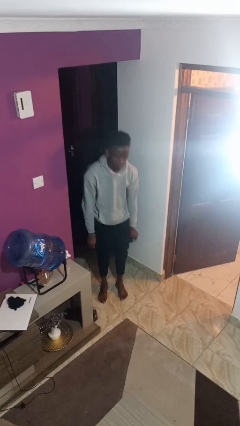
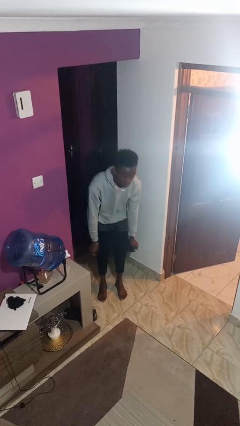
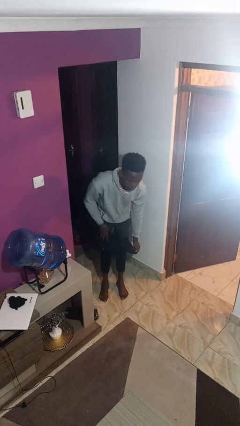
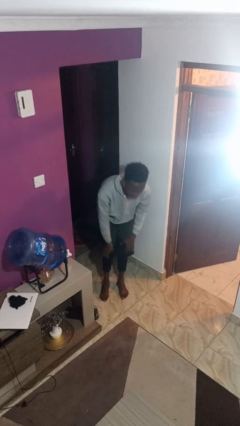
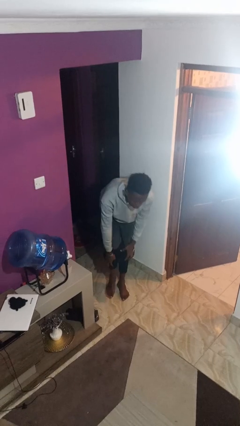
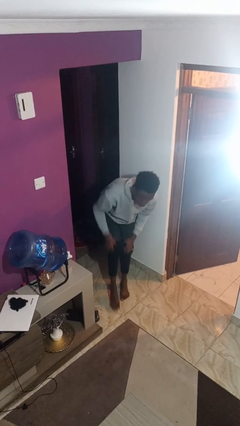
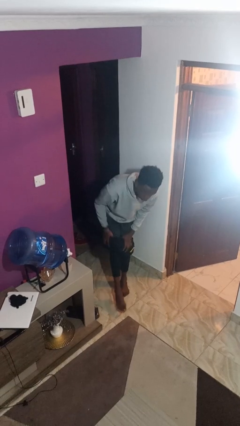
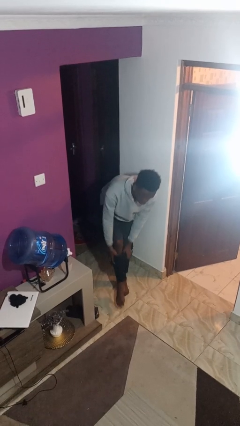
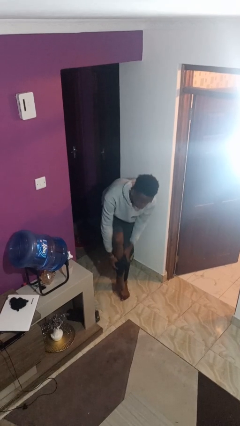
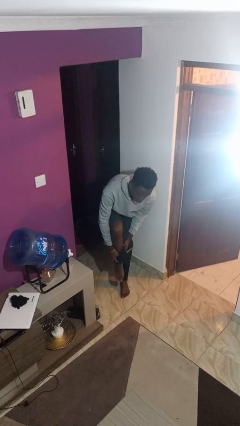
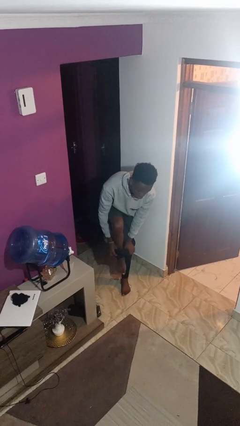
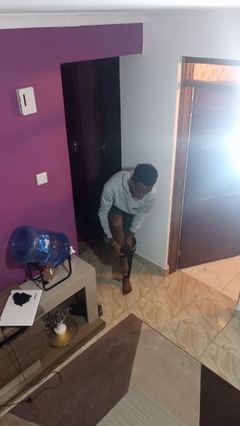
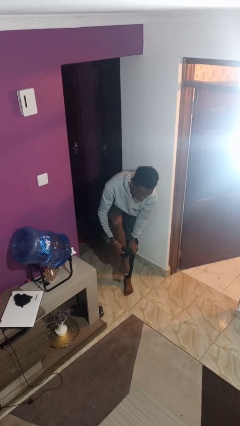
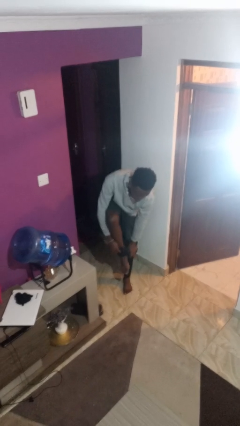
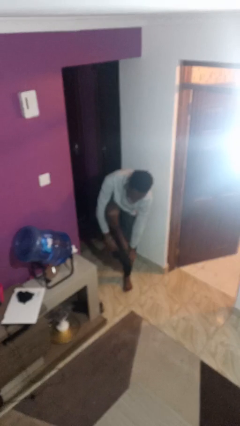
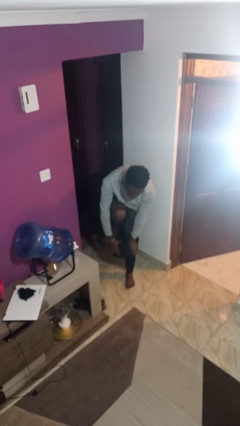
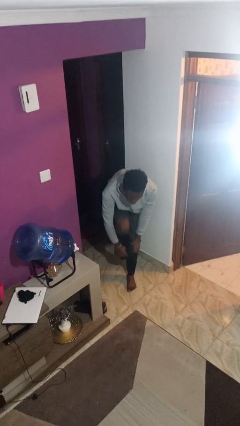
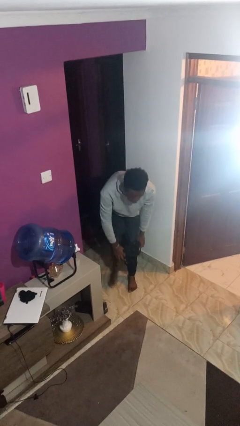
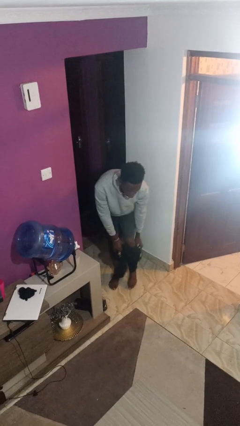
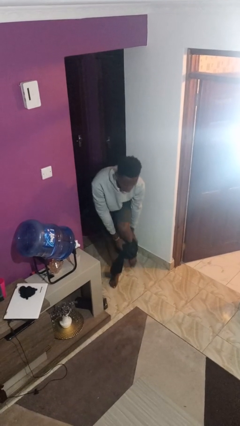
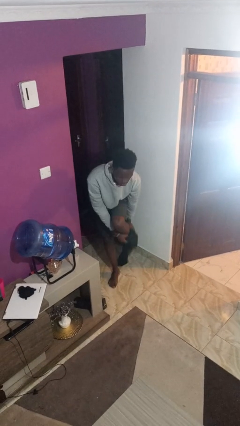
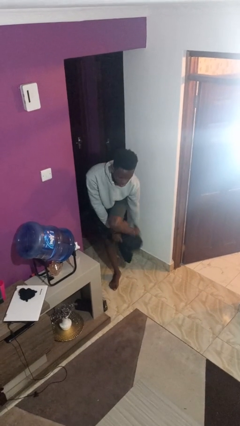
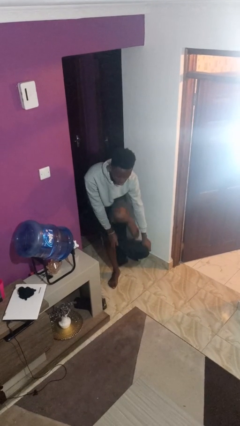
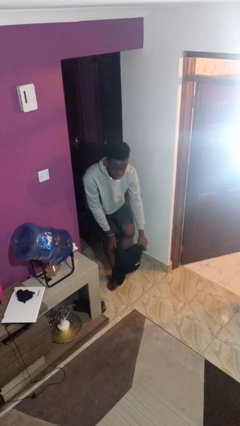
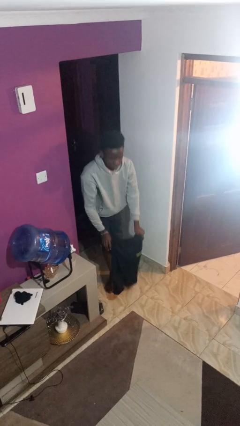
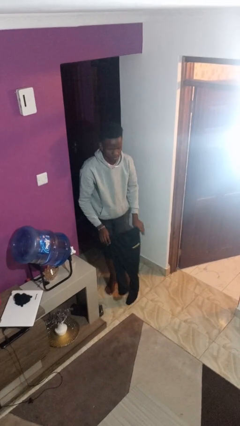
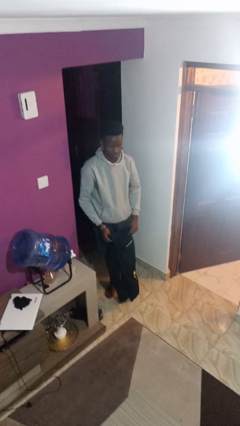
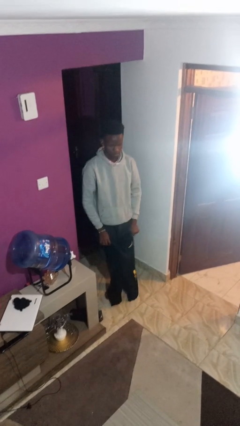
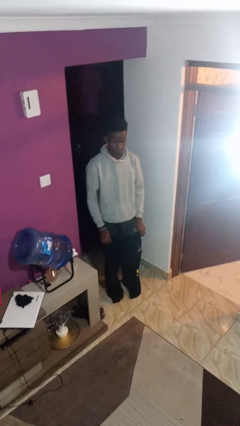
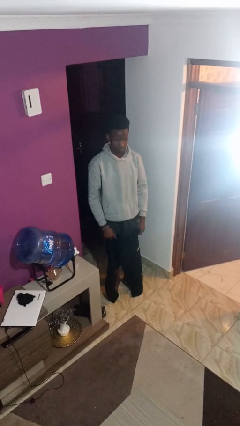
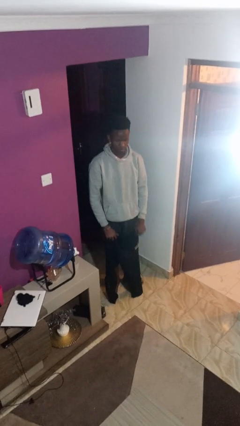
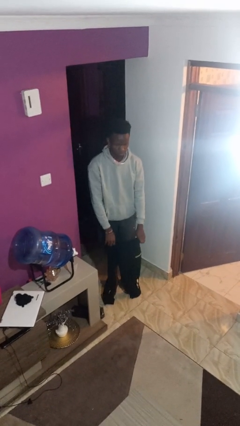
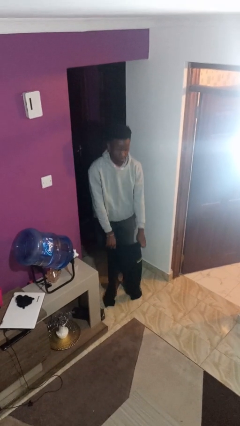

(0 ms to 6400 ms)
person takes off pants

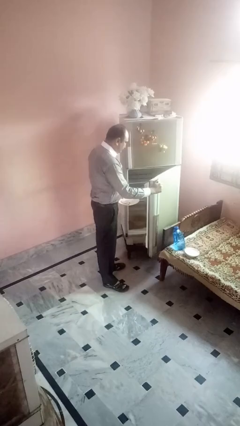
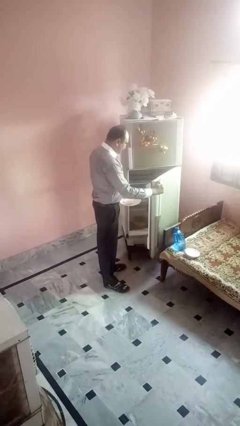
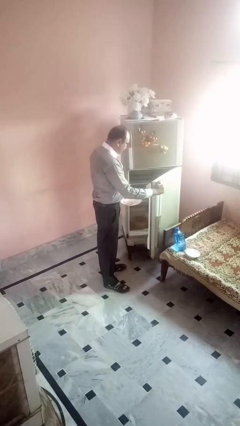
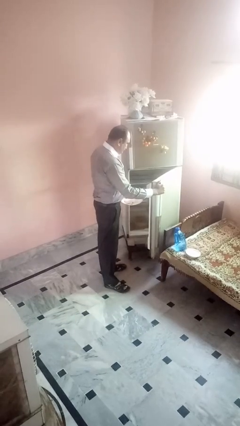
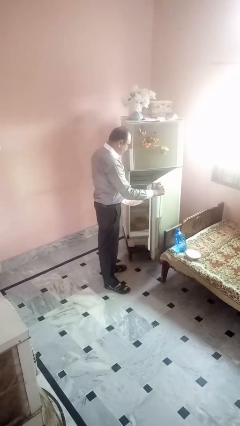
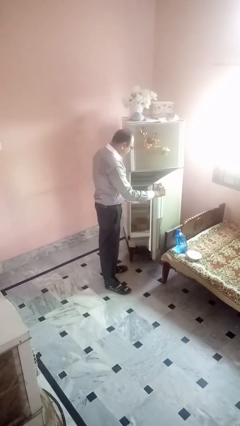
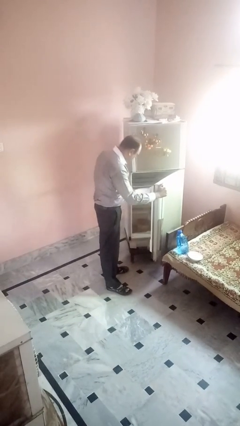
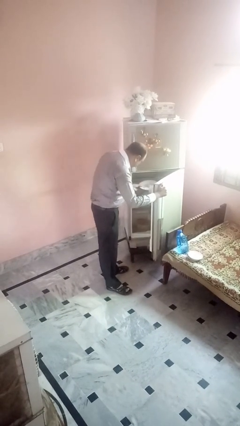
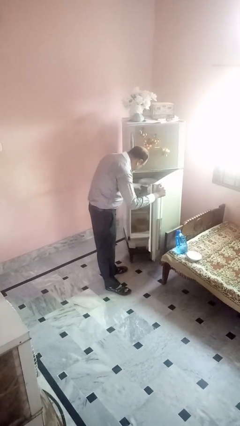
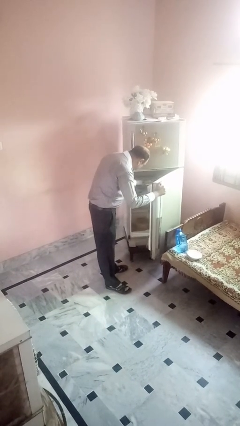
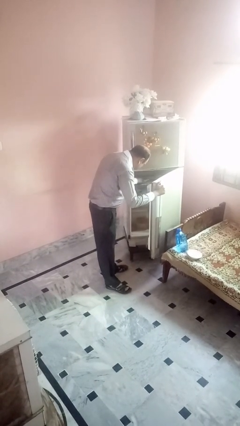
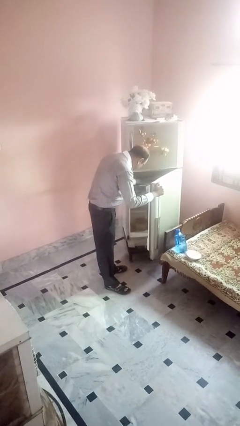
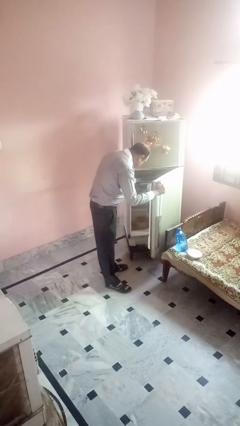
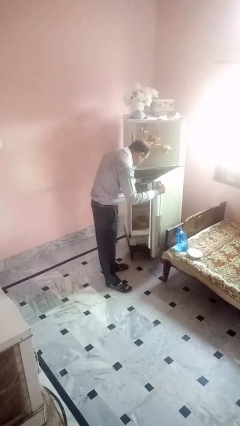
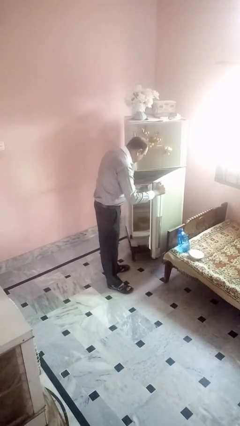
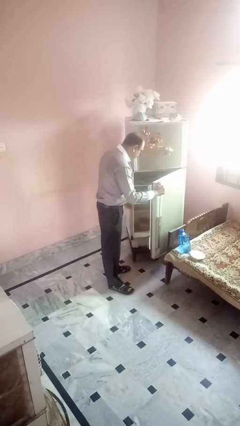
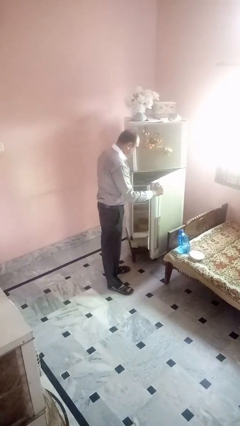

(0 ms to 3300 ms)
person puts object into refrigerator

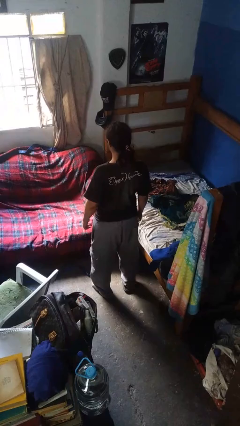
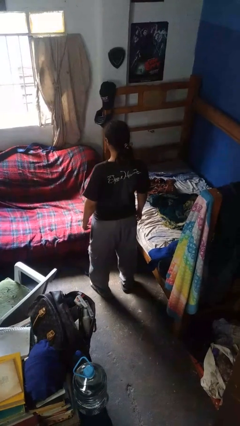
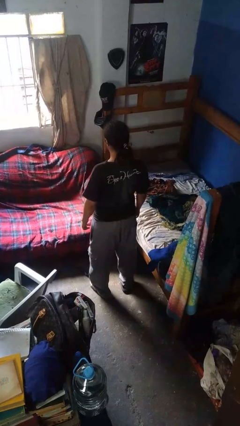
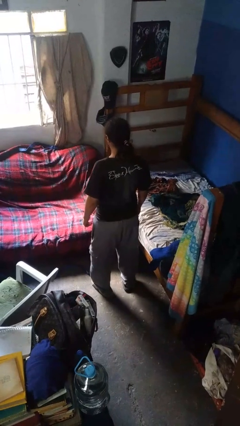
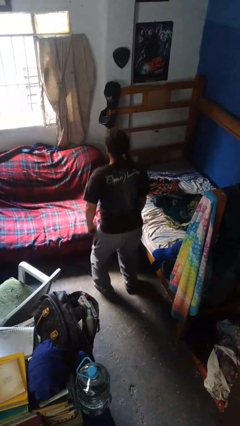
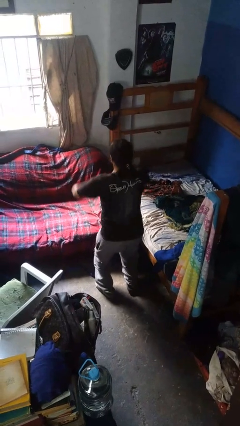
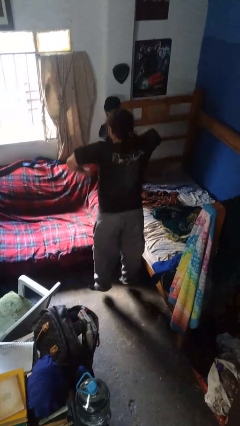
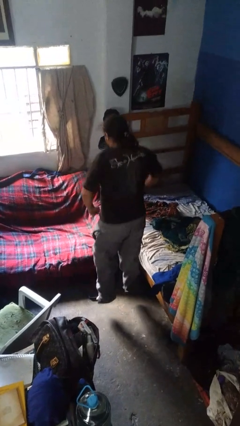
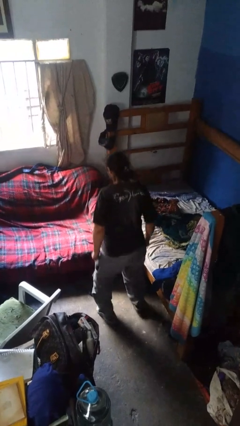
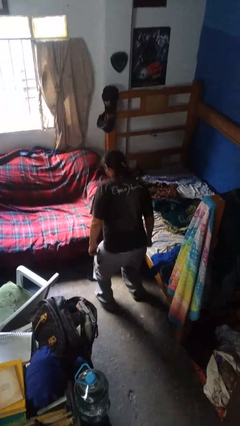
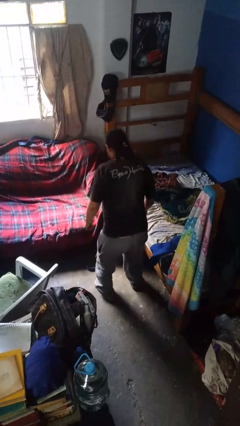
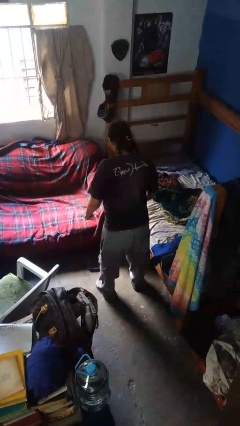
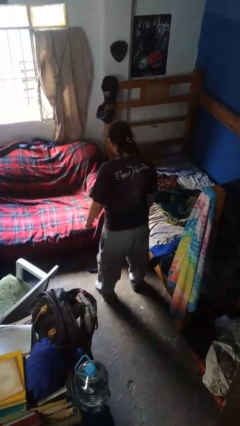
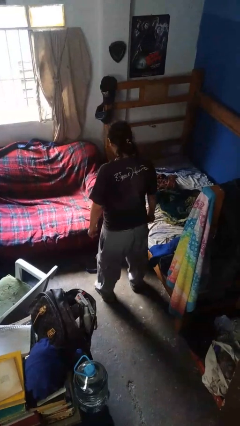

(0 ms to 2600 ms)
person jumps

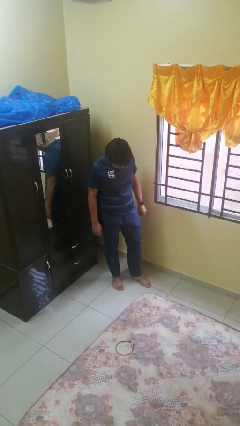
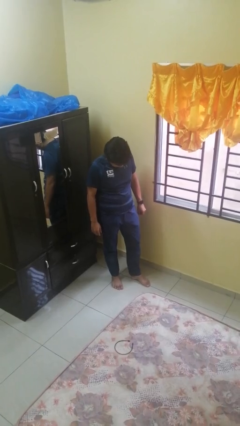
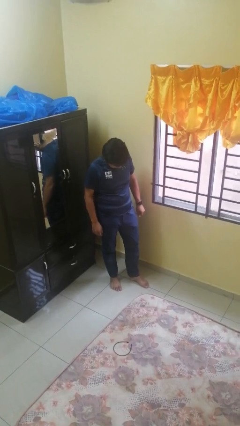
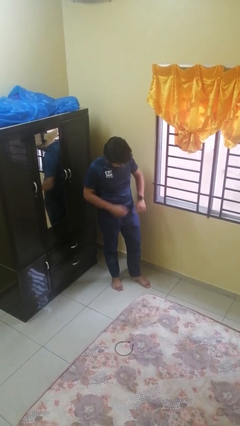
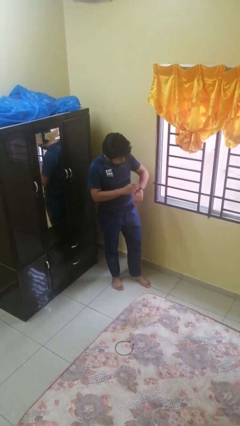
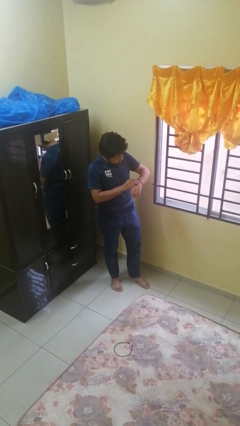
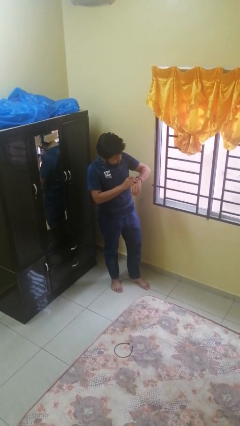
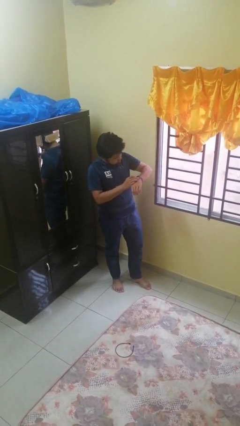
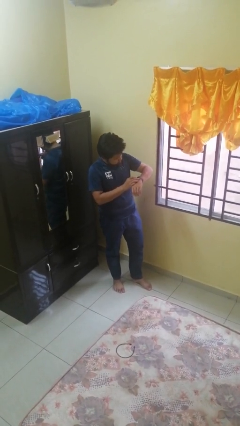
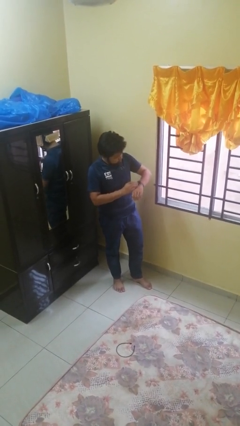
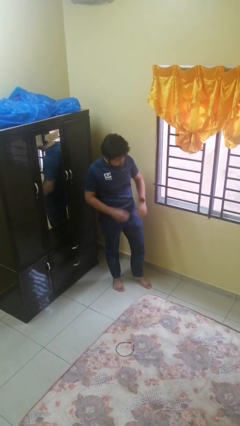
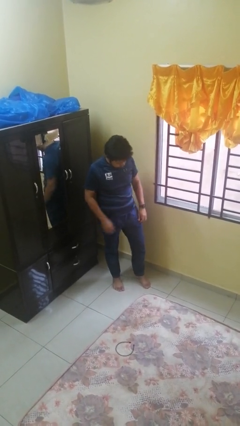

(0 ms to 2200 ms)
person looks at wristwatch

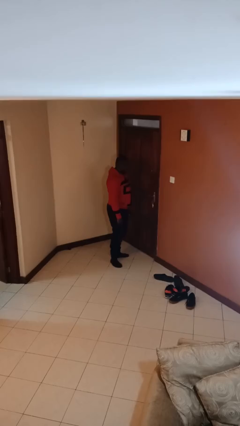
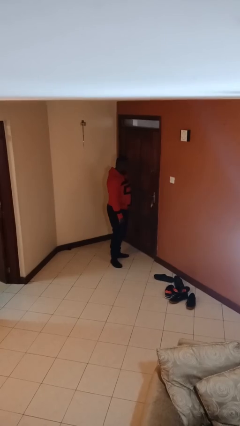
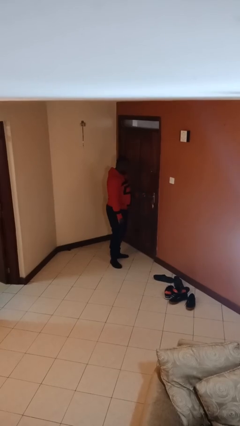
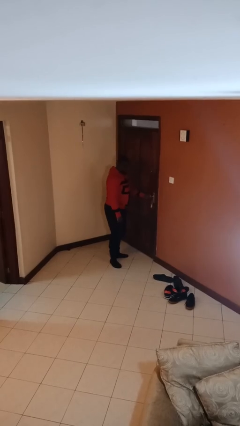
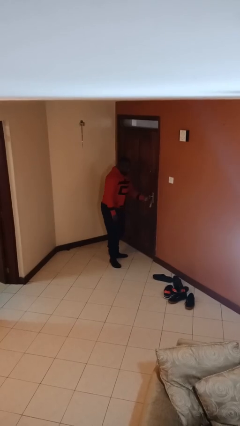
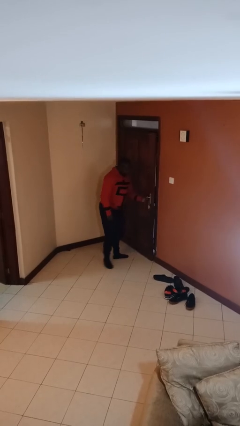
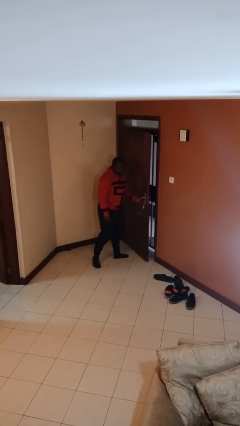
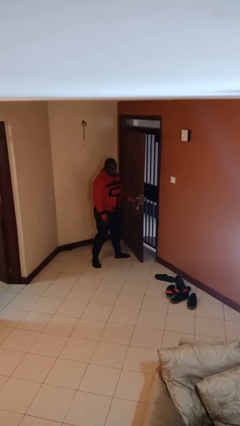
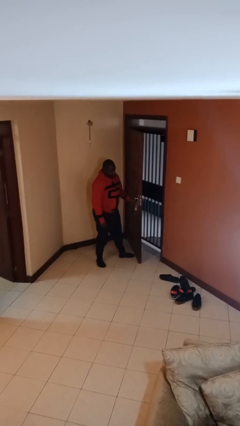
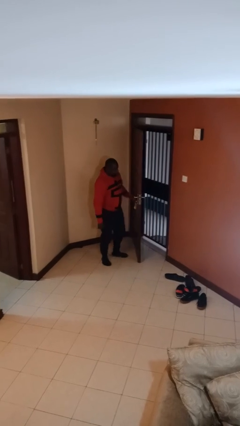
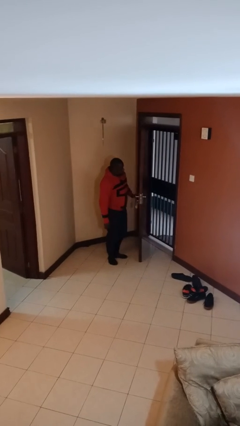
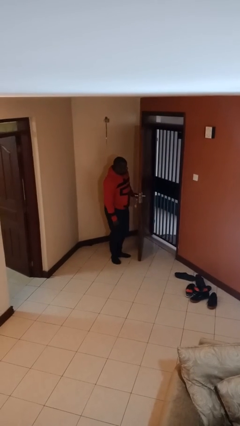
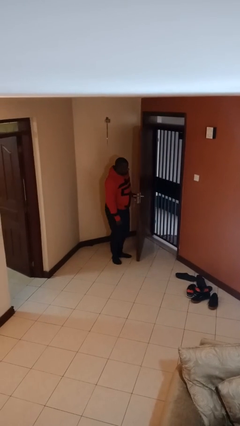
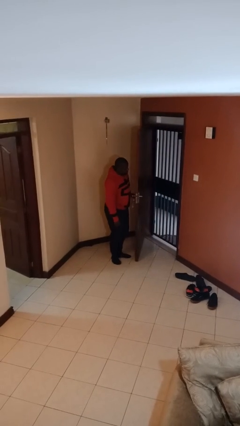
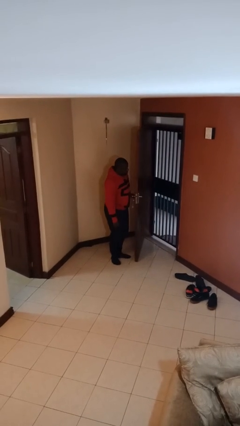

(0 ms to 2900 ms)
person opens facility door

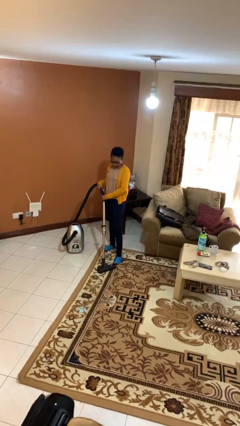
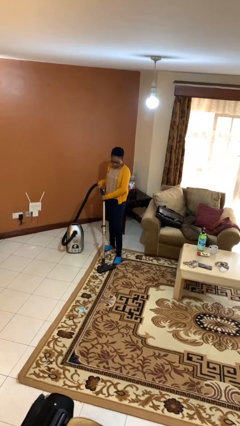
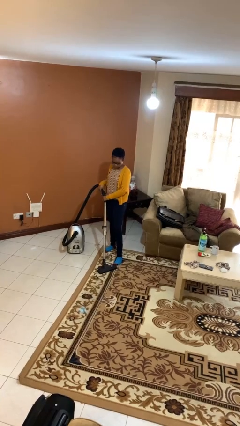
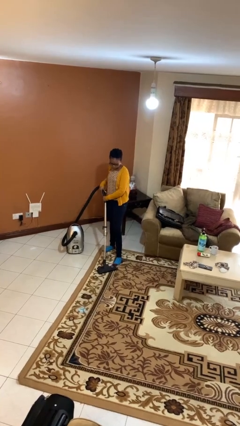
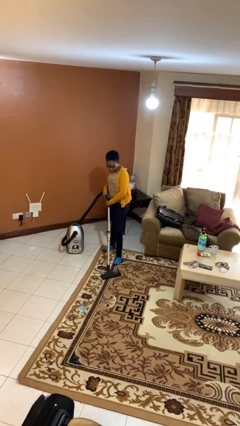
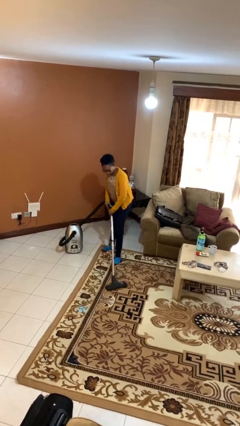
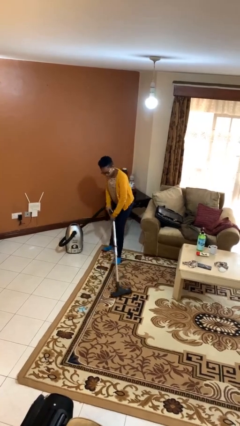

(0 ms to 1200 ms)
person vacuums carpet
